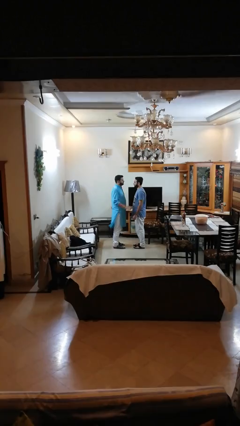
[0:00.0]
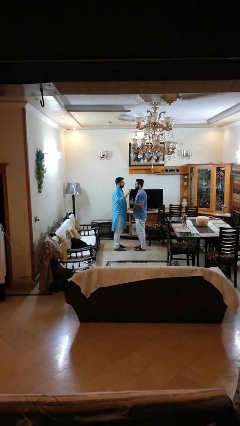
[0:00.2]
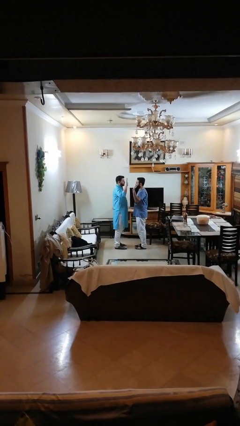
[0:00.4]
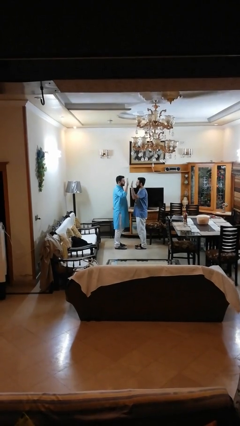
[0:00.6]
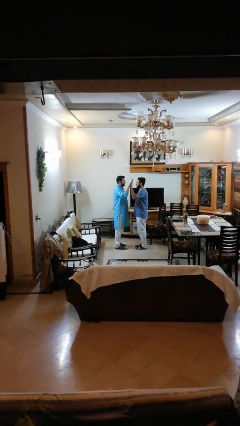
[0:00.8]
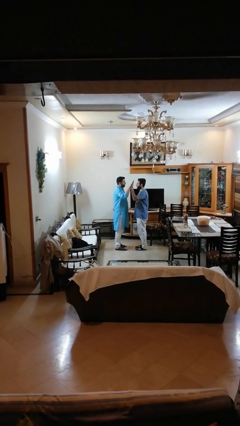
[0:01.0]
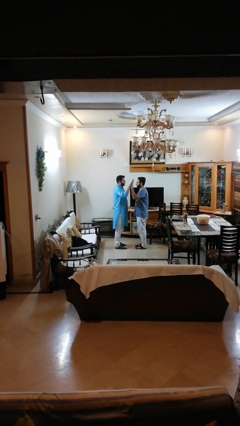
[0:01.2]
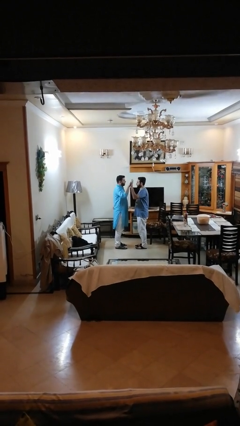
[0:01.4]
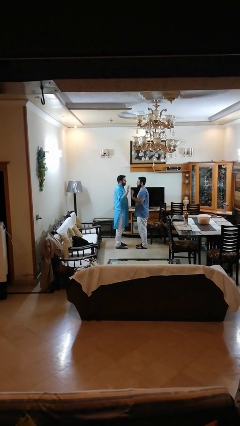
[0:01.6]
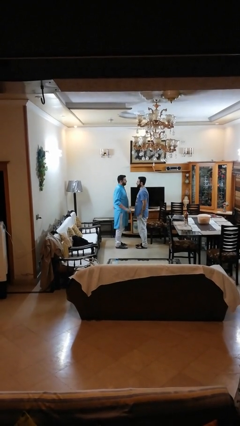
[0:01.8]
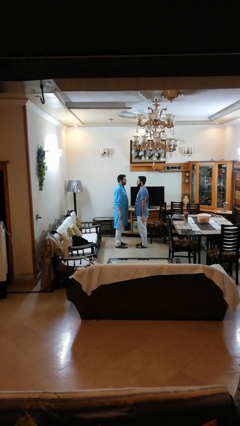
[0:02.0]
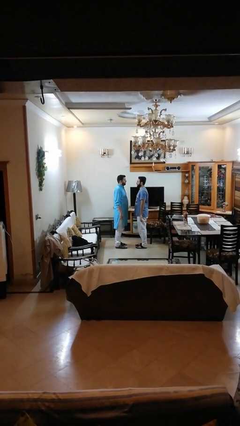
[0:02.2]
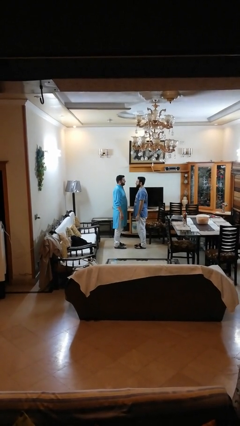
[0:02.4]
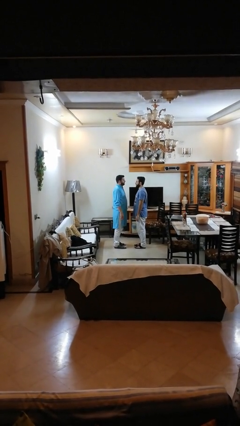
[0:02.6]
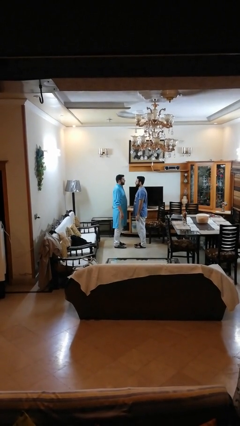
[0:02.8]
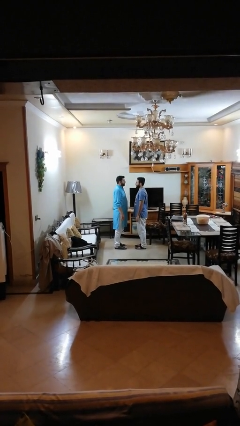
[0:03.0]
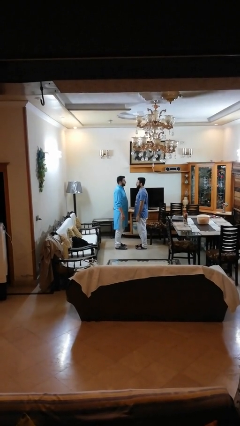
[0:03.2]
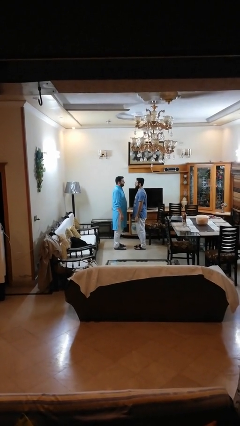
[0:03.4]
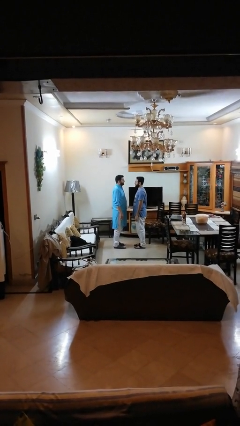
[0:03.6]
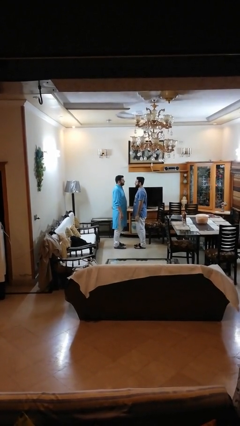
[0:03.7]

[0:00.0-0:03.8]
person highfives hand

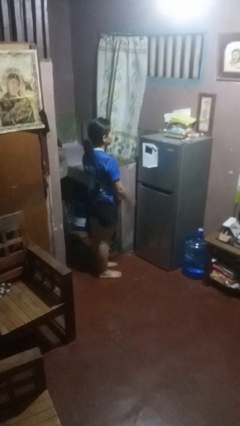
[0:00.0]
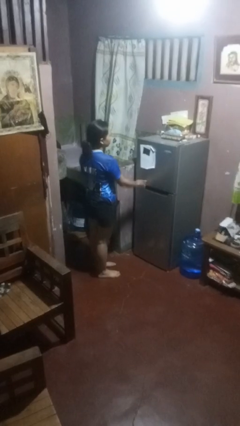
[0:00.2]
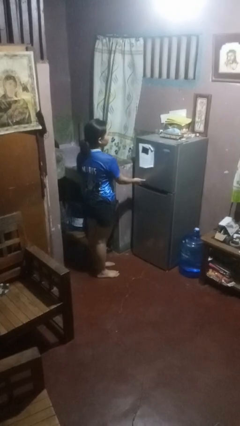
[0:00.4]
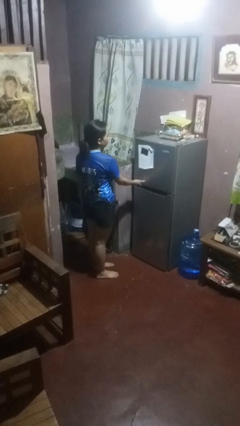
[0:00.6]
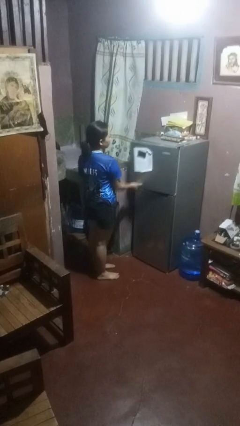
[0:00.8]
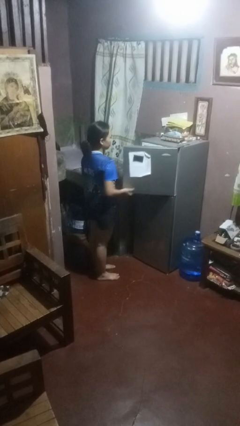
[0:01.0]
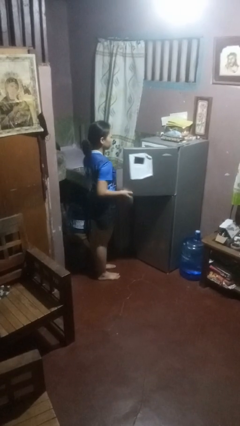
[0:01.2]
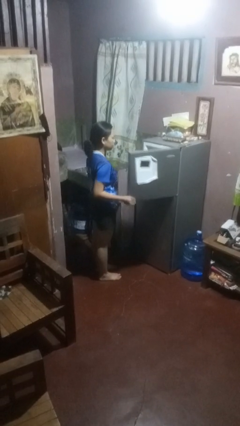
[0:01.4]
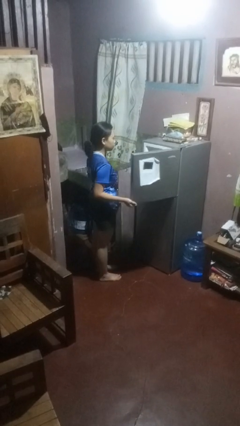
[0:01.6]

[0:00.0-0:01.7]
person opens refrigerator

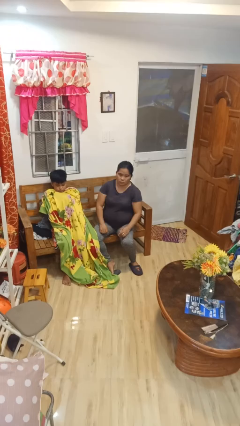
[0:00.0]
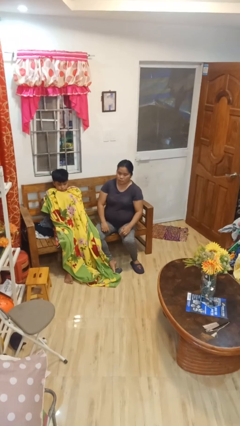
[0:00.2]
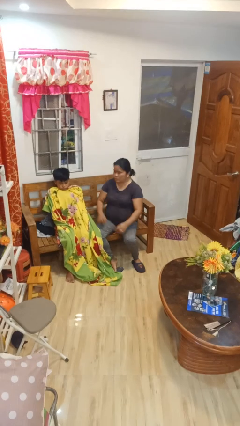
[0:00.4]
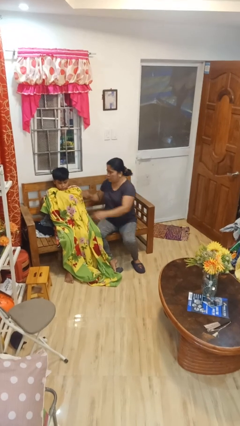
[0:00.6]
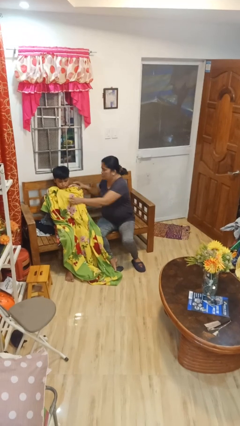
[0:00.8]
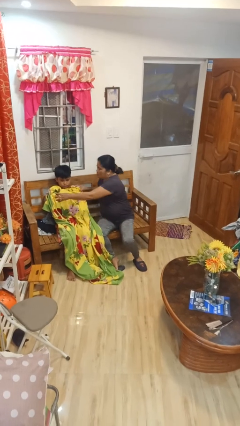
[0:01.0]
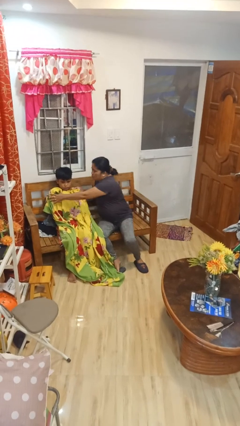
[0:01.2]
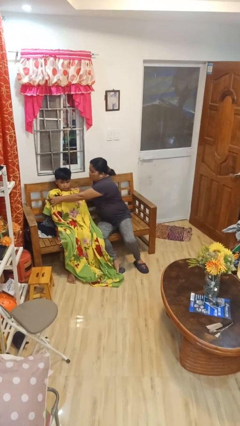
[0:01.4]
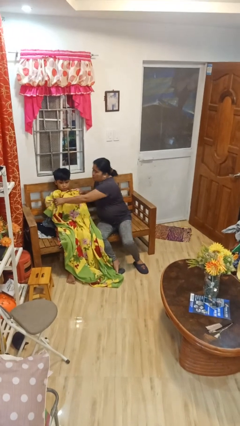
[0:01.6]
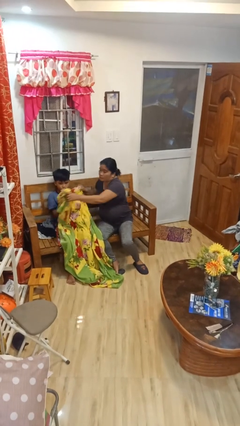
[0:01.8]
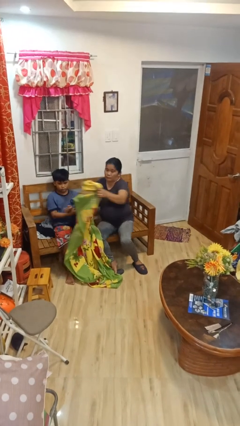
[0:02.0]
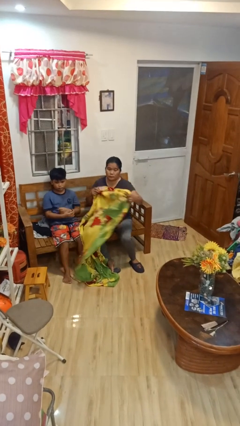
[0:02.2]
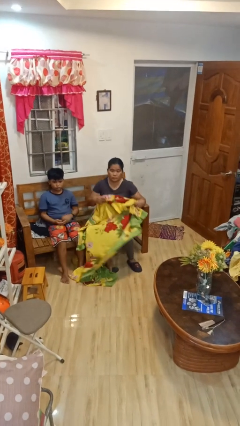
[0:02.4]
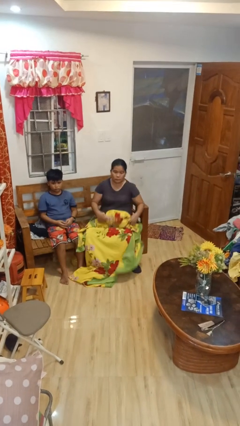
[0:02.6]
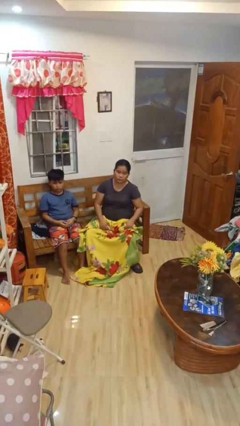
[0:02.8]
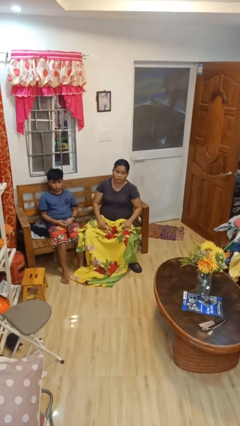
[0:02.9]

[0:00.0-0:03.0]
person uncovers friend with blanket

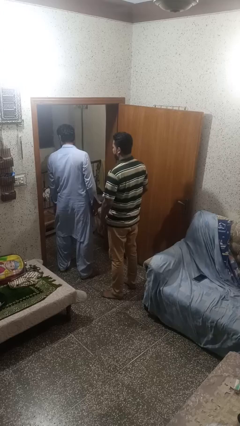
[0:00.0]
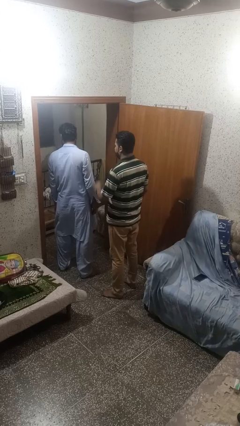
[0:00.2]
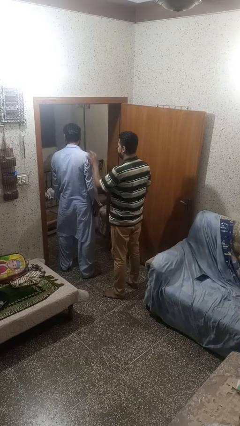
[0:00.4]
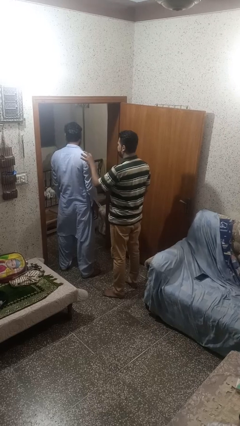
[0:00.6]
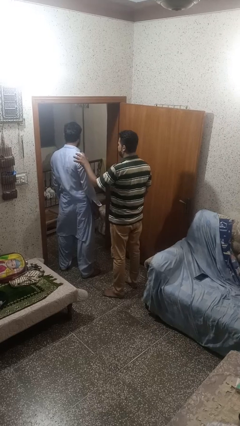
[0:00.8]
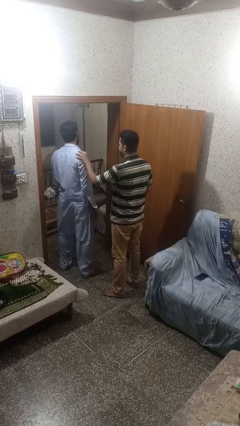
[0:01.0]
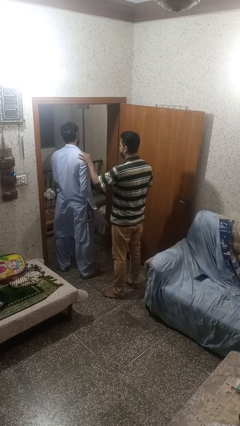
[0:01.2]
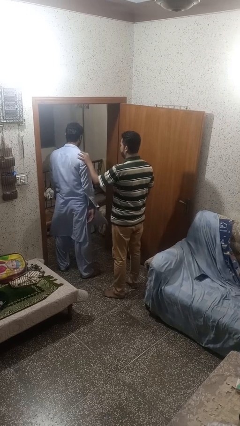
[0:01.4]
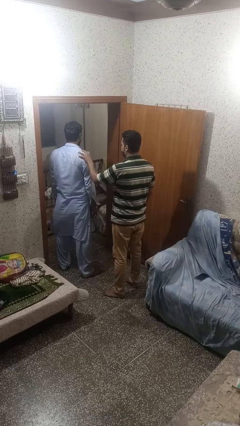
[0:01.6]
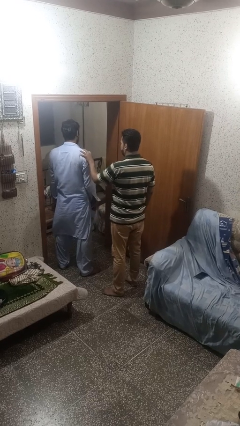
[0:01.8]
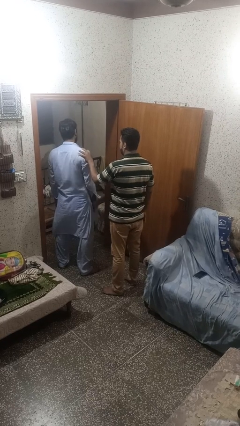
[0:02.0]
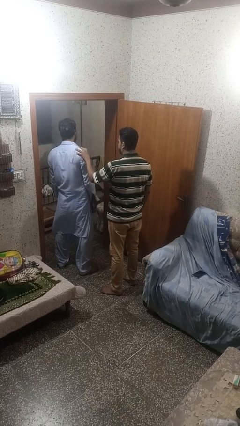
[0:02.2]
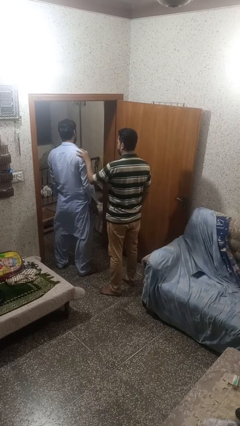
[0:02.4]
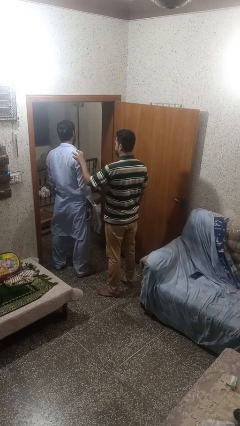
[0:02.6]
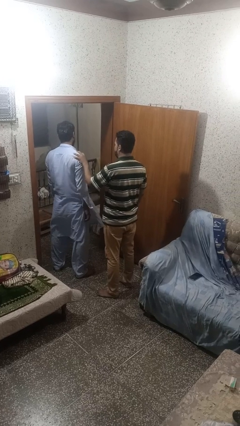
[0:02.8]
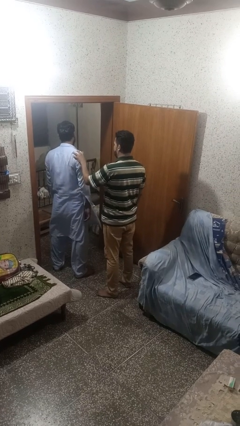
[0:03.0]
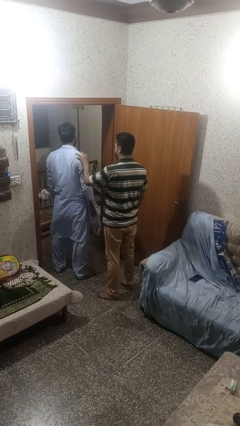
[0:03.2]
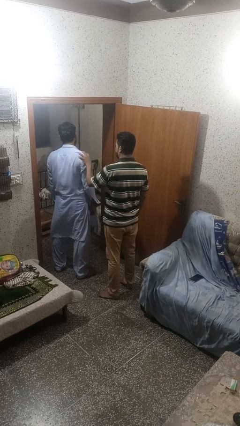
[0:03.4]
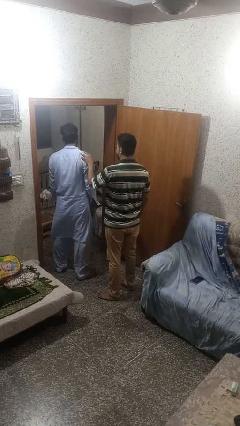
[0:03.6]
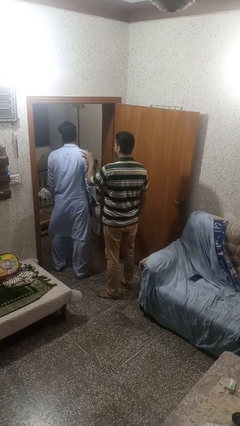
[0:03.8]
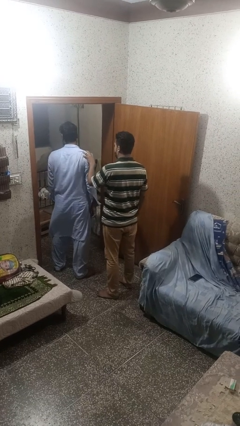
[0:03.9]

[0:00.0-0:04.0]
person grabs person by shoulder

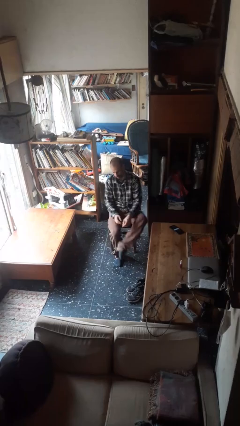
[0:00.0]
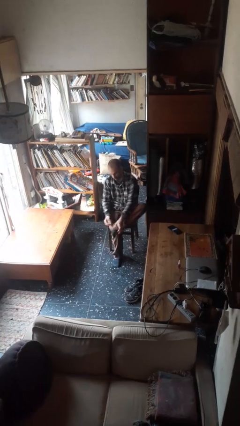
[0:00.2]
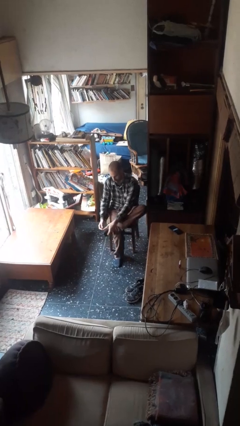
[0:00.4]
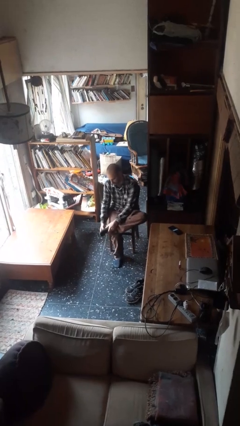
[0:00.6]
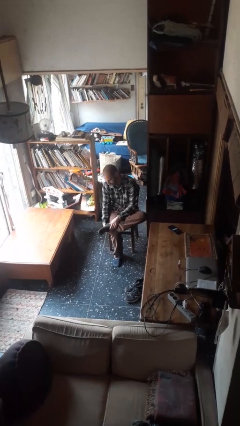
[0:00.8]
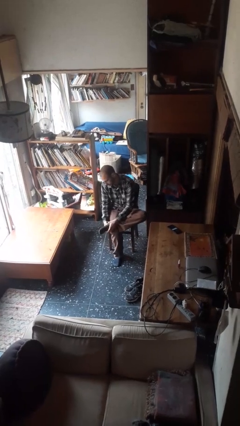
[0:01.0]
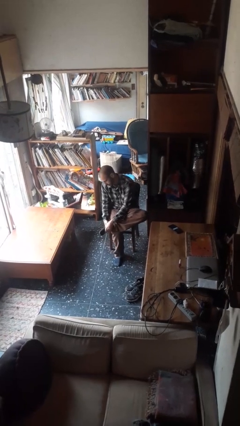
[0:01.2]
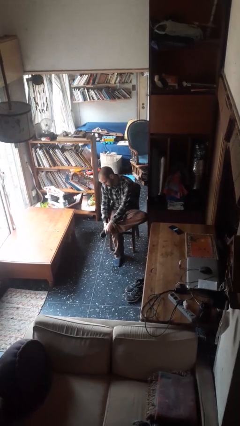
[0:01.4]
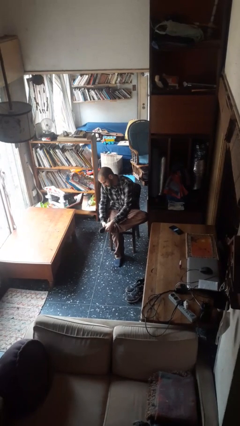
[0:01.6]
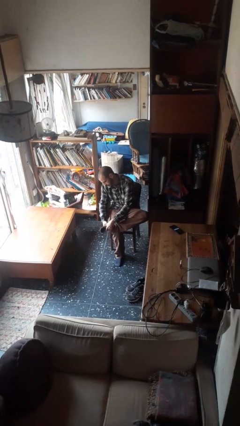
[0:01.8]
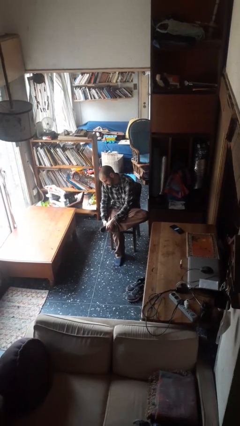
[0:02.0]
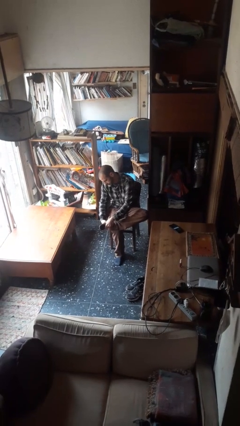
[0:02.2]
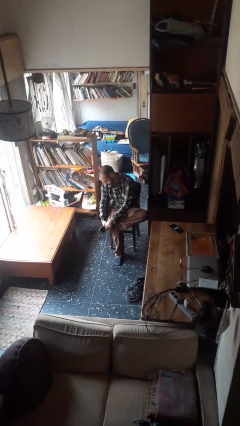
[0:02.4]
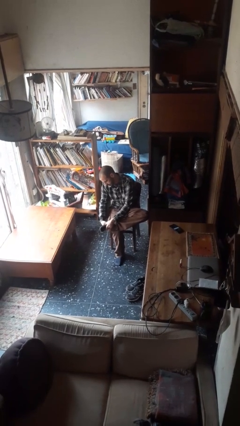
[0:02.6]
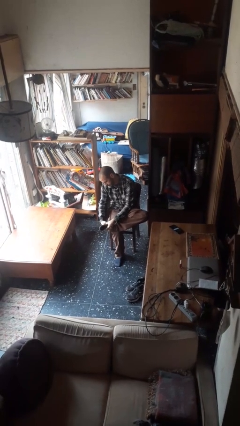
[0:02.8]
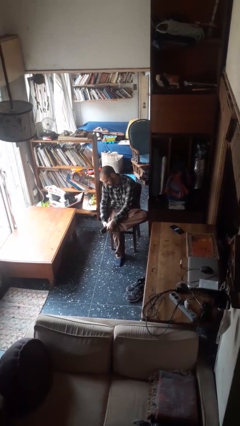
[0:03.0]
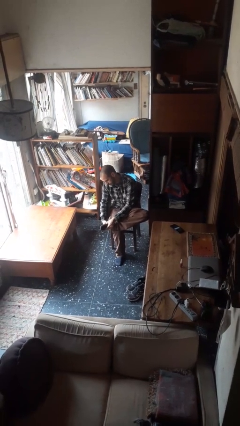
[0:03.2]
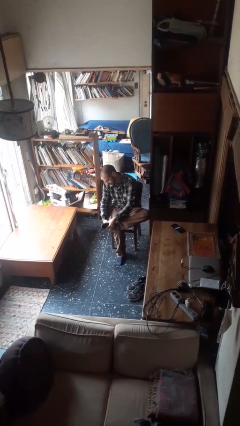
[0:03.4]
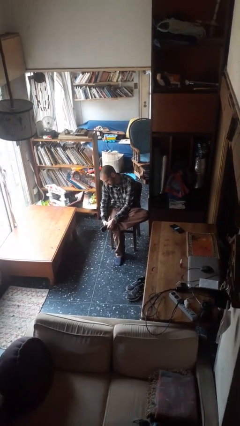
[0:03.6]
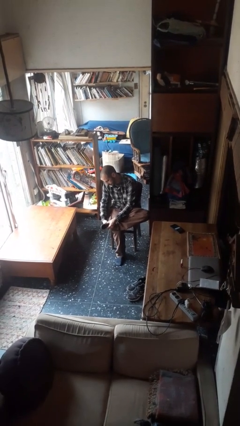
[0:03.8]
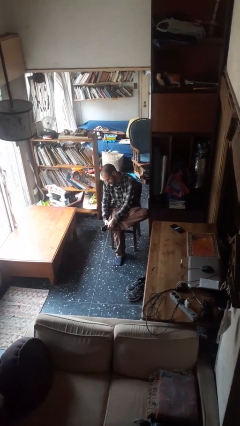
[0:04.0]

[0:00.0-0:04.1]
person rubs foot

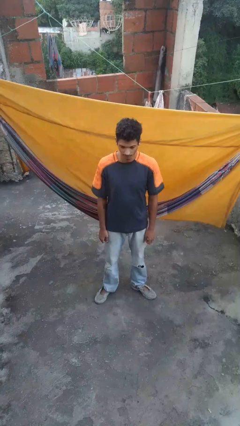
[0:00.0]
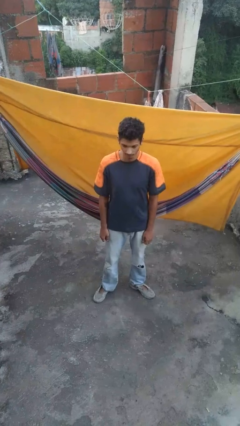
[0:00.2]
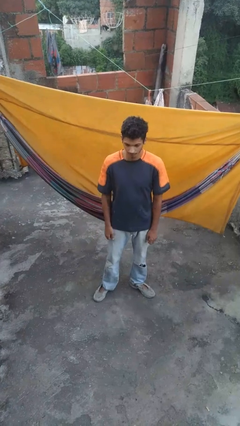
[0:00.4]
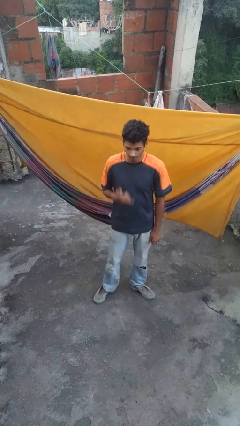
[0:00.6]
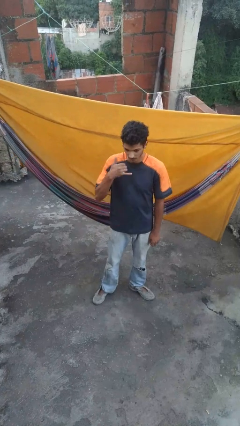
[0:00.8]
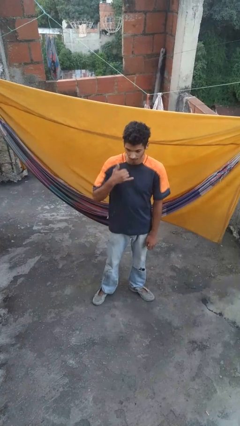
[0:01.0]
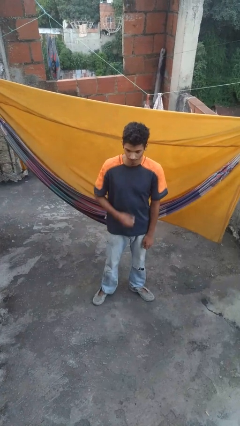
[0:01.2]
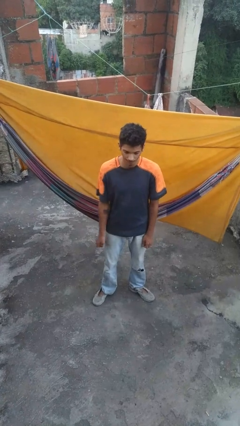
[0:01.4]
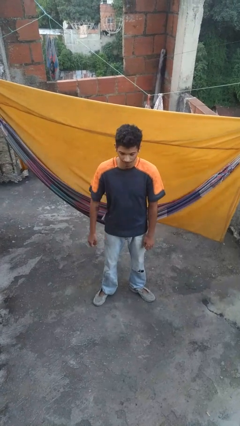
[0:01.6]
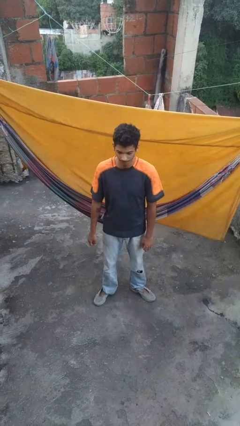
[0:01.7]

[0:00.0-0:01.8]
person gestures call me
